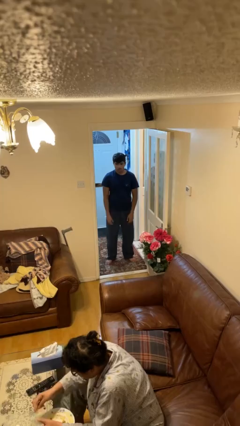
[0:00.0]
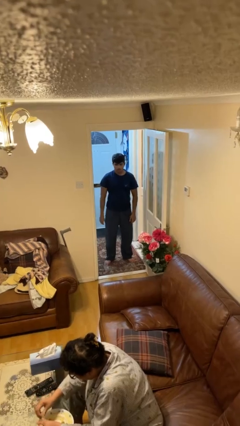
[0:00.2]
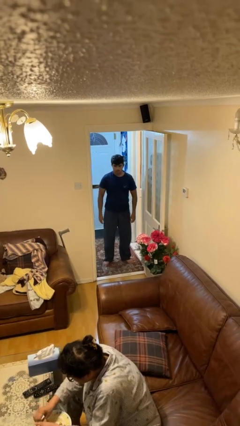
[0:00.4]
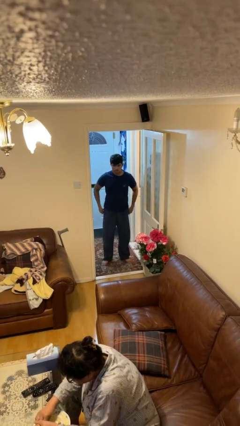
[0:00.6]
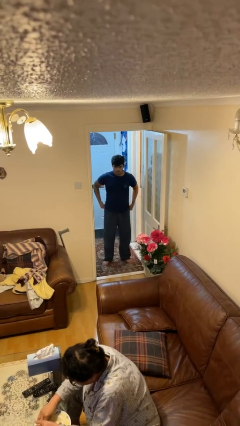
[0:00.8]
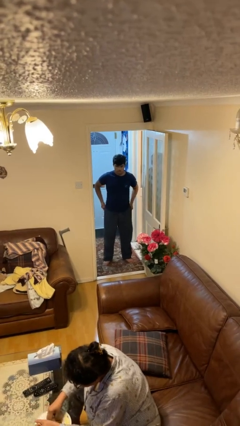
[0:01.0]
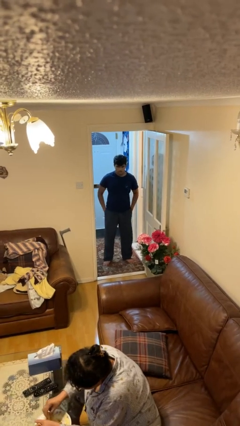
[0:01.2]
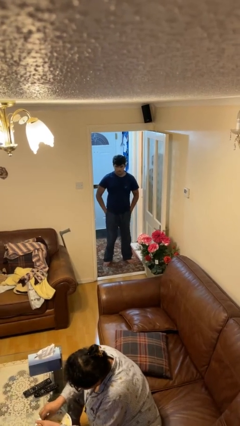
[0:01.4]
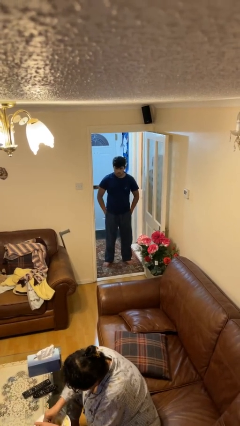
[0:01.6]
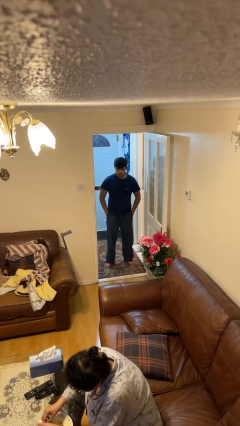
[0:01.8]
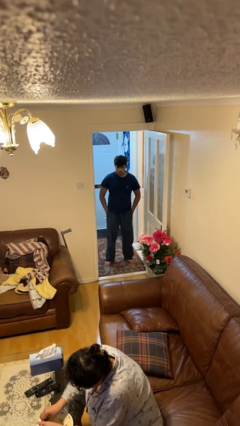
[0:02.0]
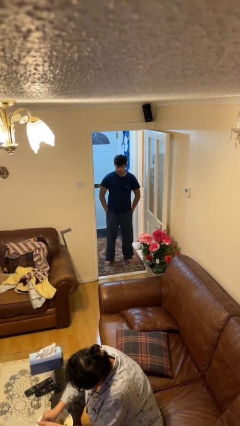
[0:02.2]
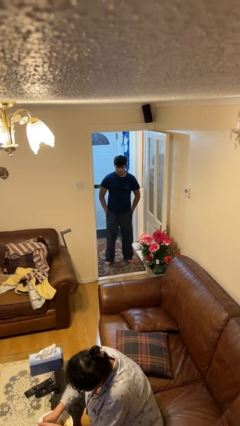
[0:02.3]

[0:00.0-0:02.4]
person puts hands in back pockets

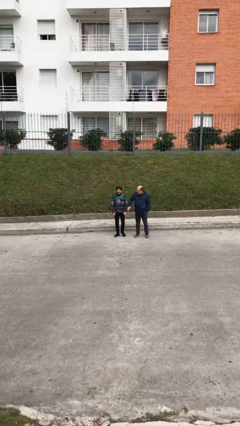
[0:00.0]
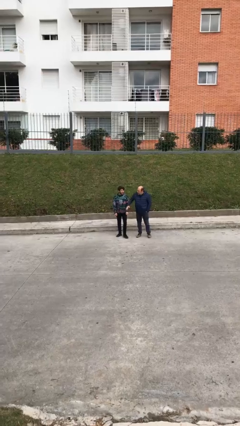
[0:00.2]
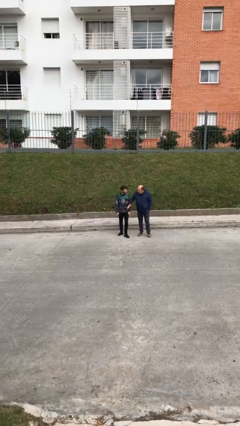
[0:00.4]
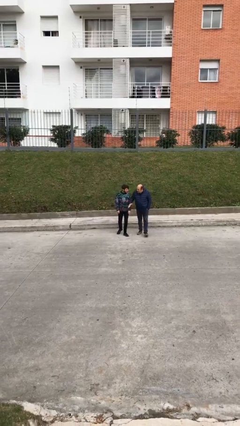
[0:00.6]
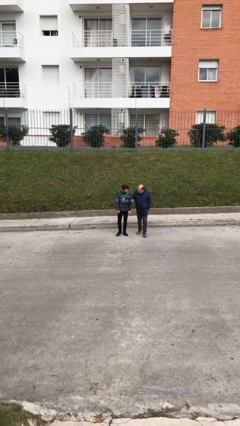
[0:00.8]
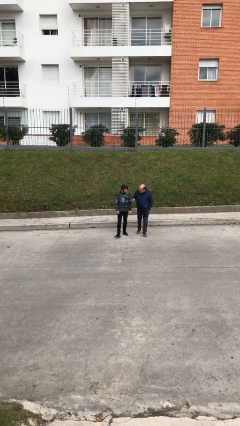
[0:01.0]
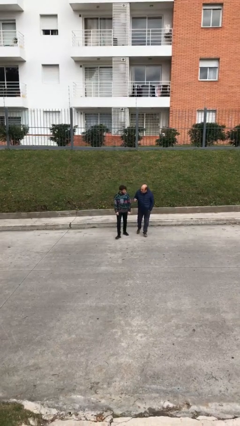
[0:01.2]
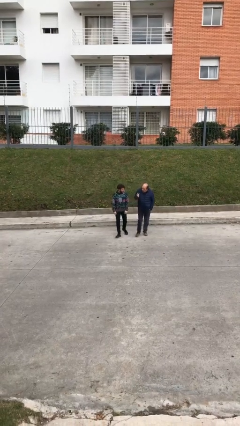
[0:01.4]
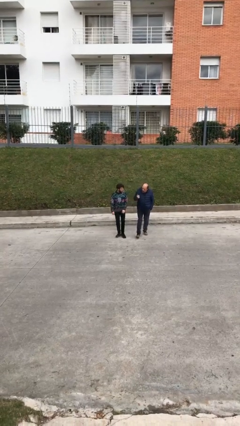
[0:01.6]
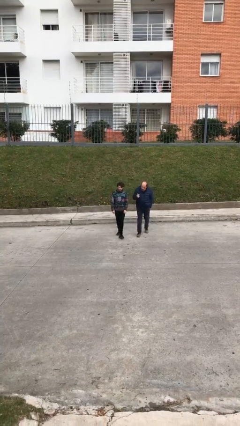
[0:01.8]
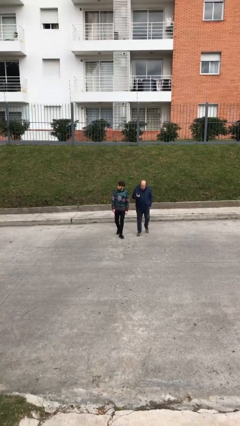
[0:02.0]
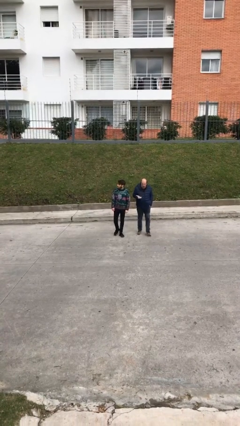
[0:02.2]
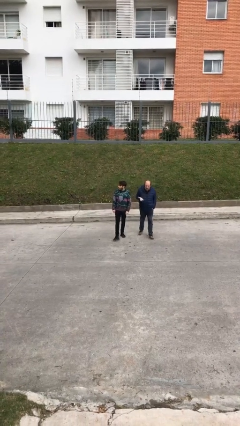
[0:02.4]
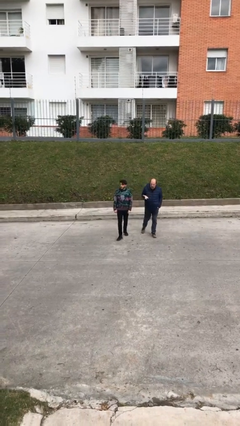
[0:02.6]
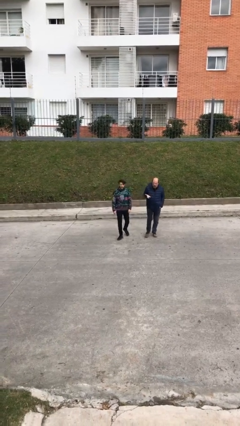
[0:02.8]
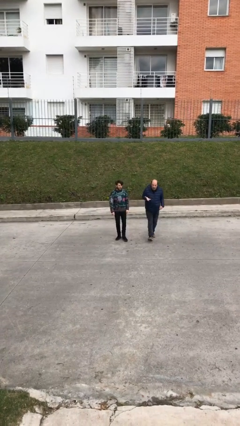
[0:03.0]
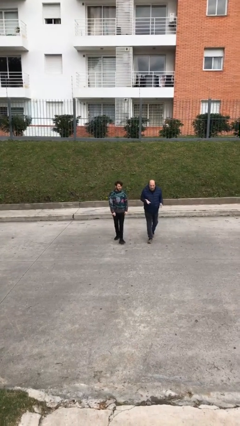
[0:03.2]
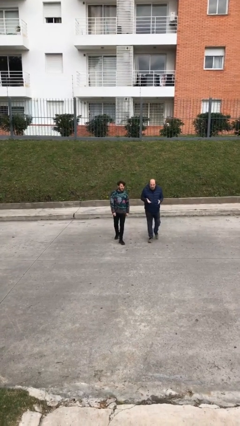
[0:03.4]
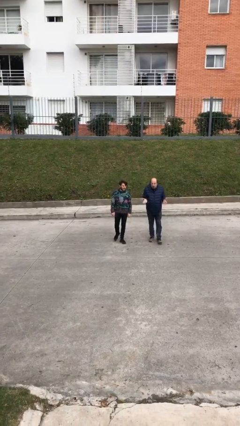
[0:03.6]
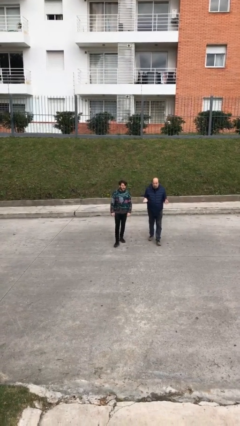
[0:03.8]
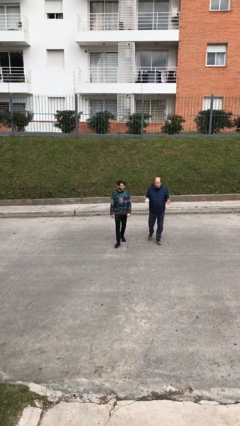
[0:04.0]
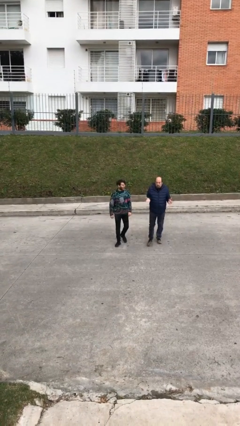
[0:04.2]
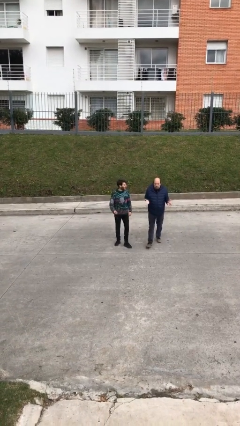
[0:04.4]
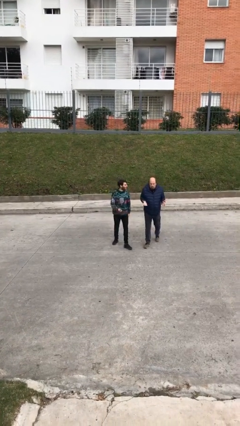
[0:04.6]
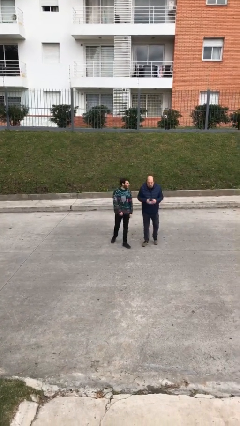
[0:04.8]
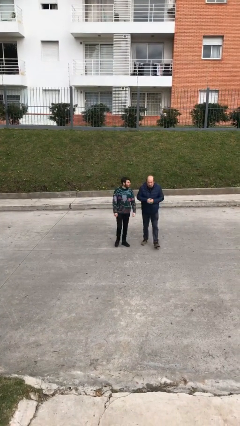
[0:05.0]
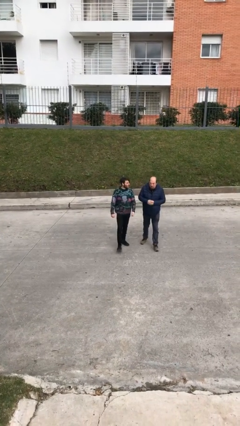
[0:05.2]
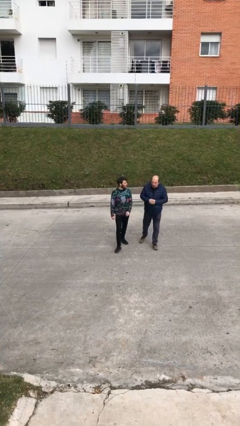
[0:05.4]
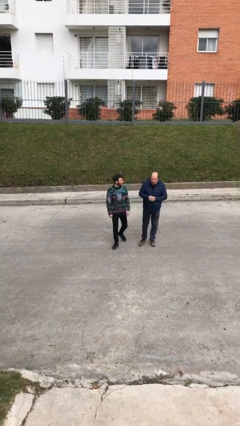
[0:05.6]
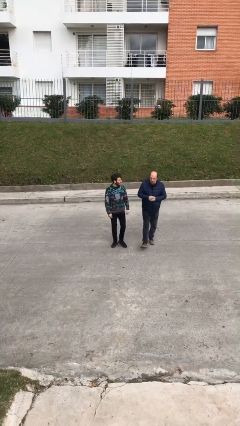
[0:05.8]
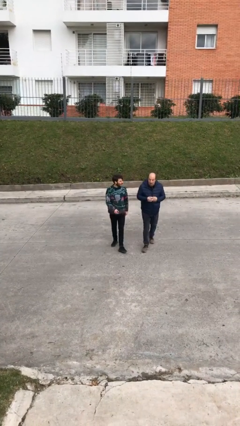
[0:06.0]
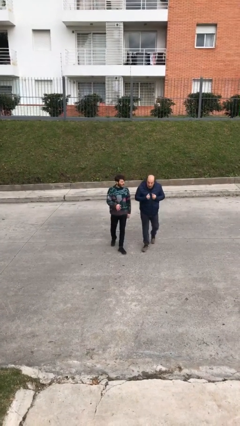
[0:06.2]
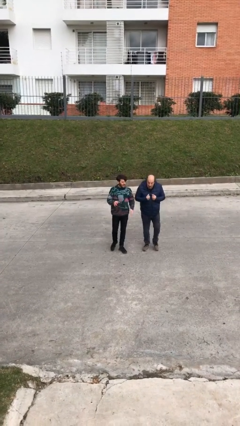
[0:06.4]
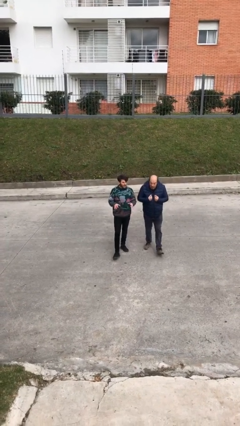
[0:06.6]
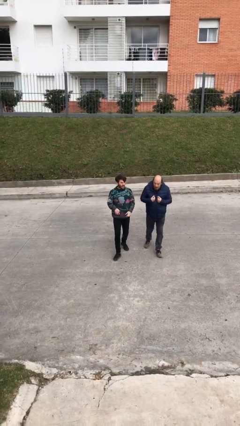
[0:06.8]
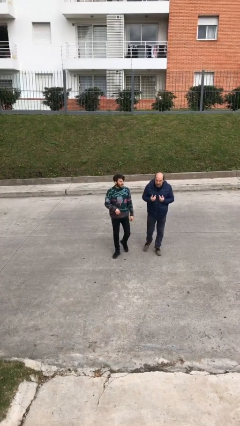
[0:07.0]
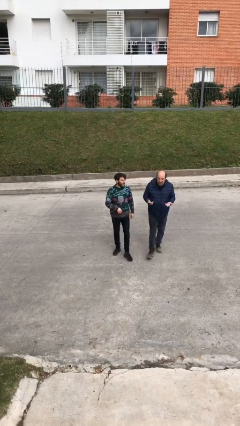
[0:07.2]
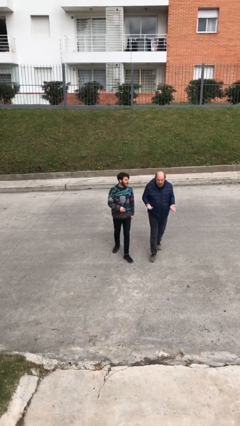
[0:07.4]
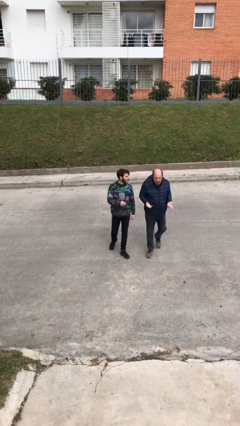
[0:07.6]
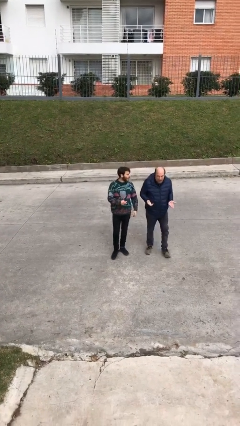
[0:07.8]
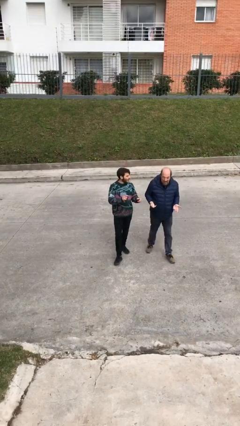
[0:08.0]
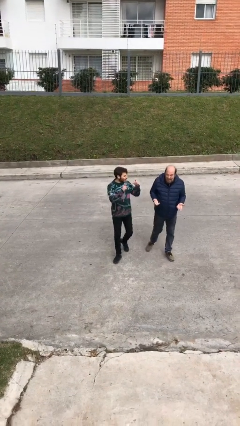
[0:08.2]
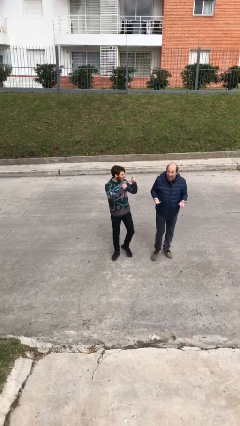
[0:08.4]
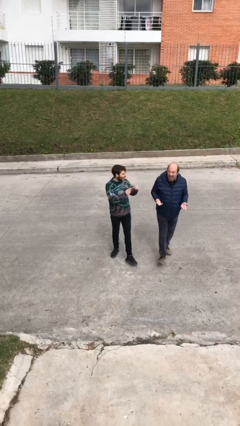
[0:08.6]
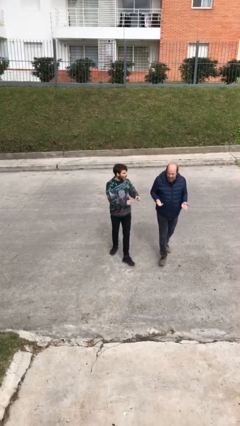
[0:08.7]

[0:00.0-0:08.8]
person talks to person

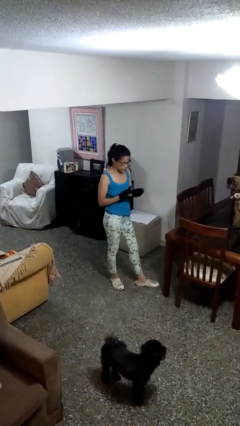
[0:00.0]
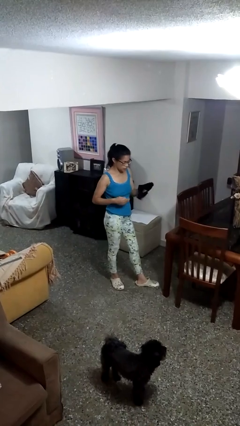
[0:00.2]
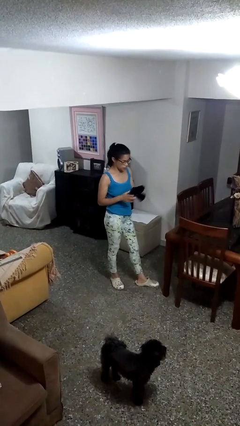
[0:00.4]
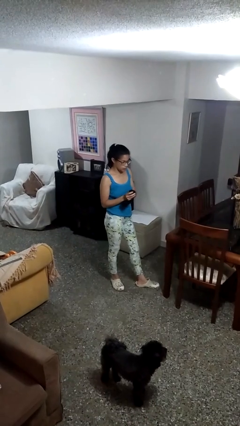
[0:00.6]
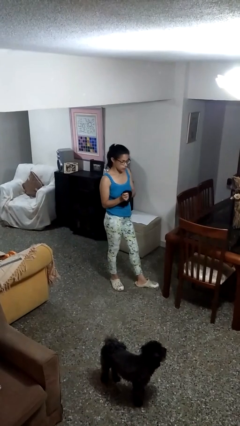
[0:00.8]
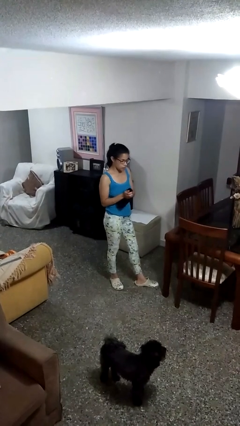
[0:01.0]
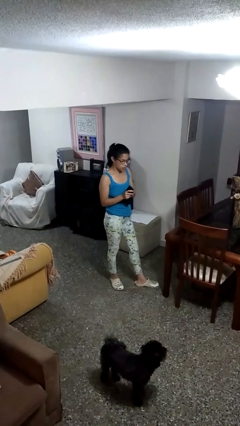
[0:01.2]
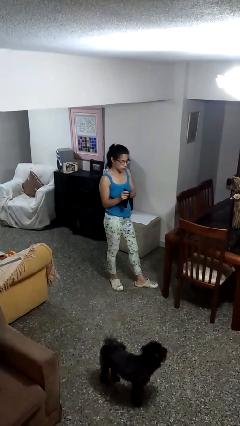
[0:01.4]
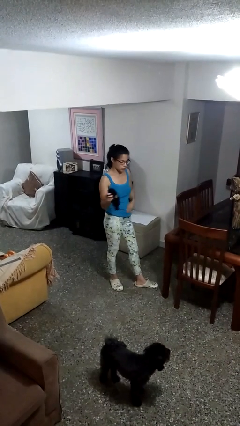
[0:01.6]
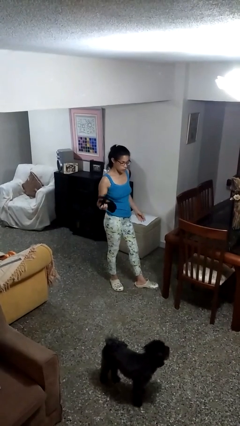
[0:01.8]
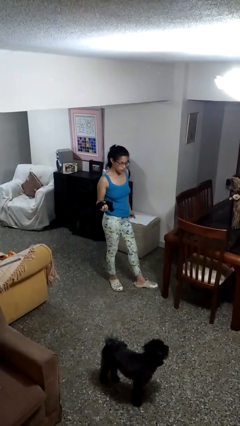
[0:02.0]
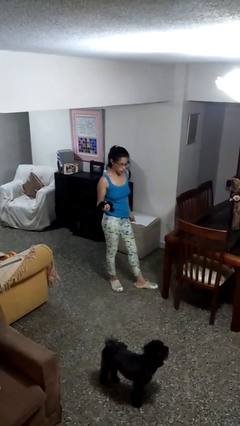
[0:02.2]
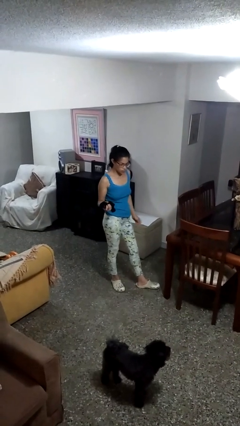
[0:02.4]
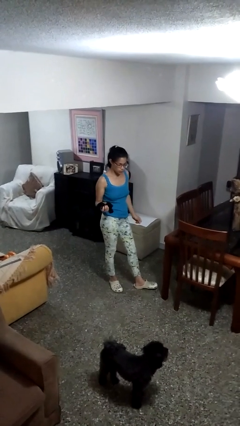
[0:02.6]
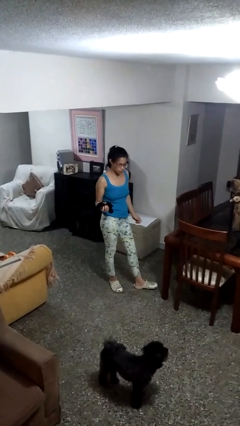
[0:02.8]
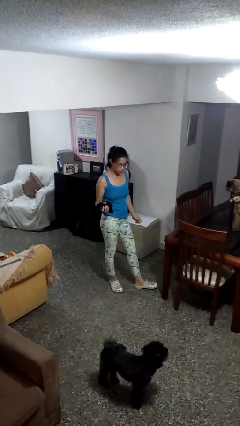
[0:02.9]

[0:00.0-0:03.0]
person takes off gloves

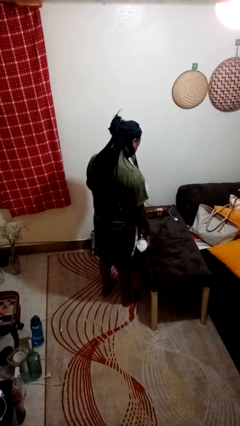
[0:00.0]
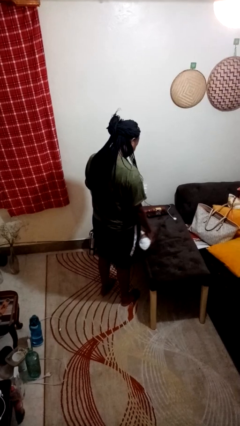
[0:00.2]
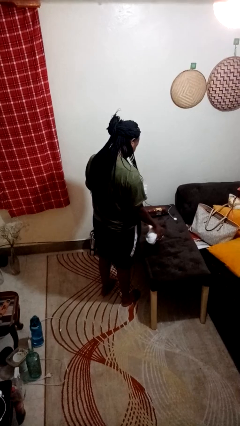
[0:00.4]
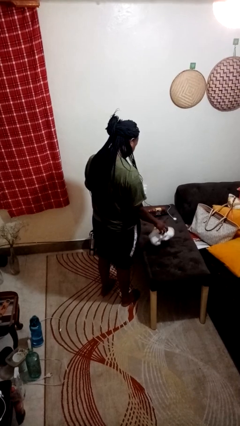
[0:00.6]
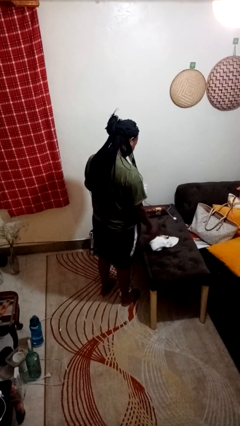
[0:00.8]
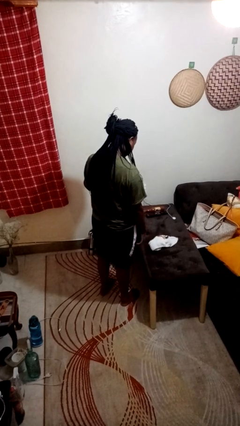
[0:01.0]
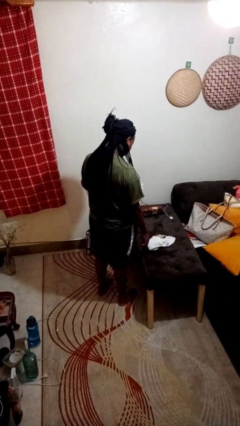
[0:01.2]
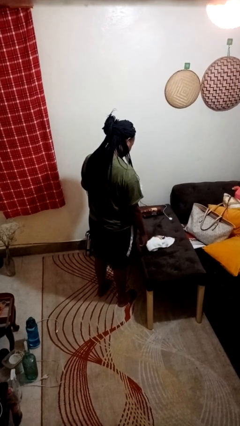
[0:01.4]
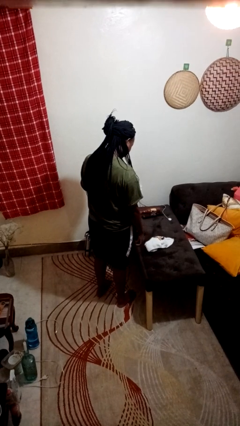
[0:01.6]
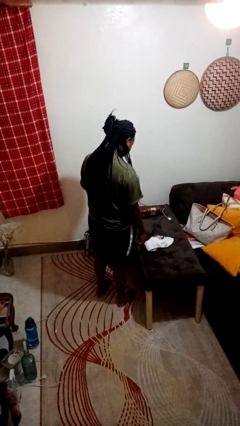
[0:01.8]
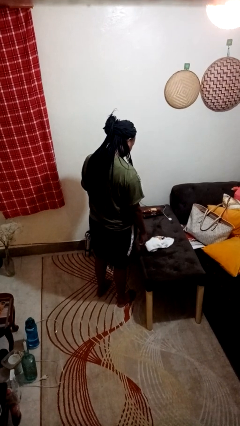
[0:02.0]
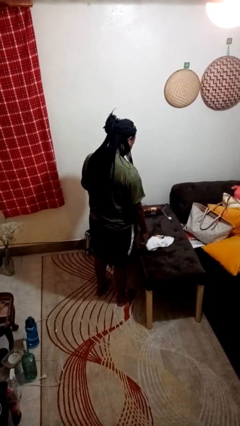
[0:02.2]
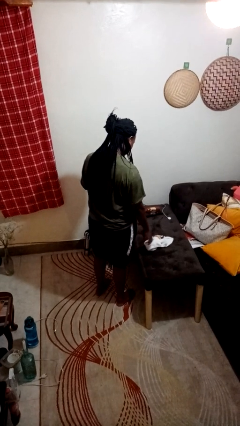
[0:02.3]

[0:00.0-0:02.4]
person throws object on table

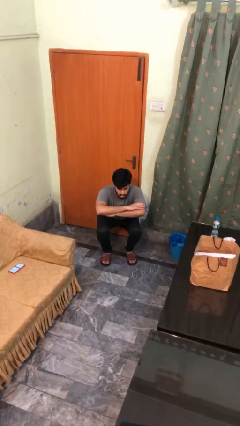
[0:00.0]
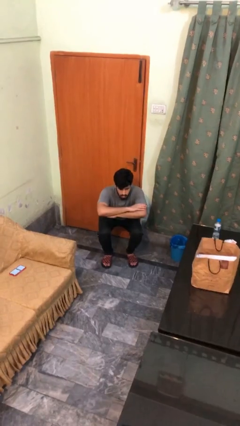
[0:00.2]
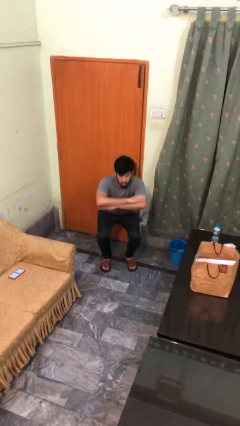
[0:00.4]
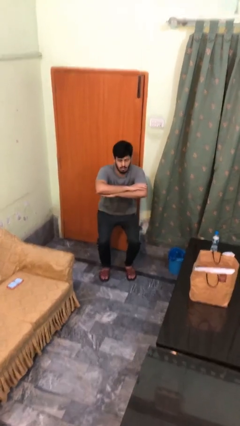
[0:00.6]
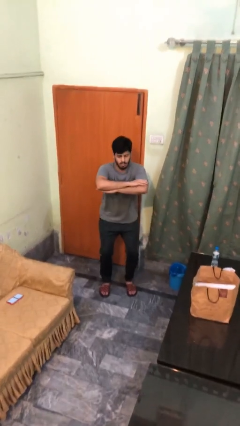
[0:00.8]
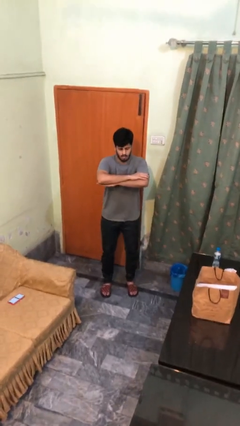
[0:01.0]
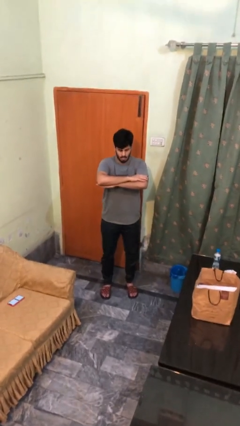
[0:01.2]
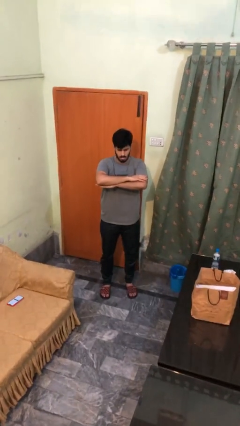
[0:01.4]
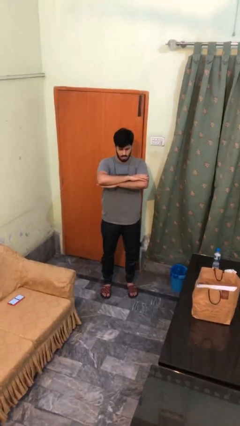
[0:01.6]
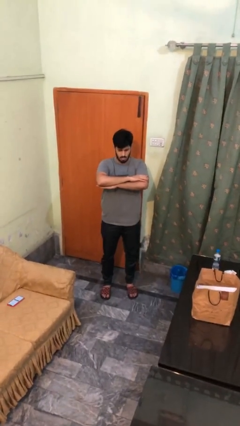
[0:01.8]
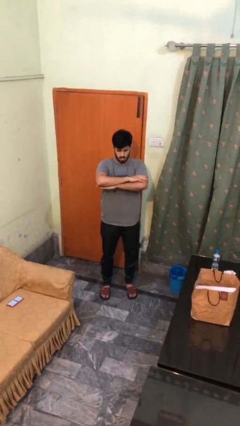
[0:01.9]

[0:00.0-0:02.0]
person stands up
